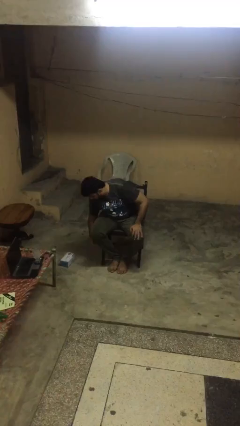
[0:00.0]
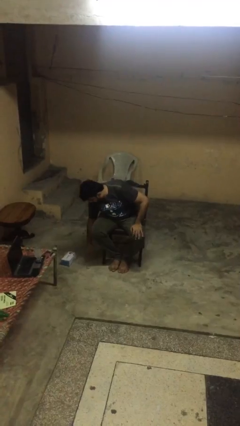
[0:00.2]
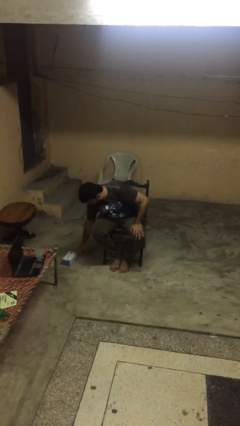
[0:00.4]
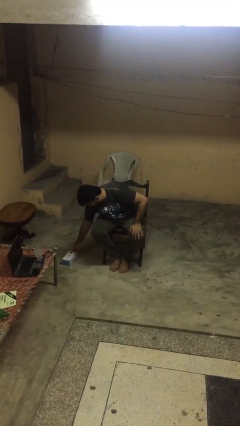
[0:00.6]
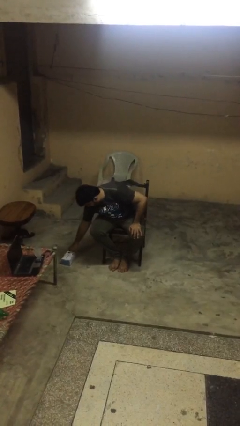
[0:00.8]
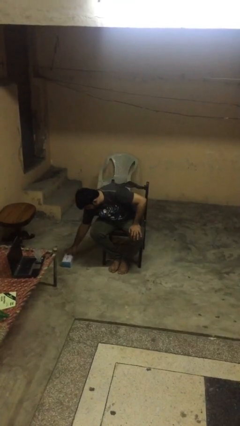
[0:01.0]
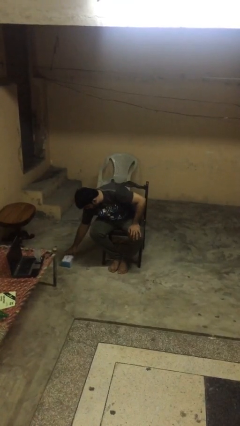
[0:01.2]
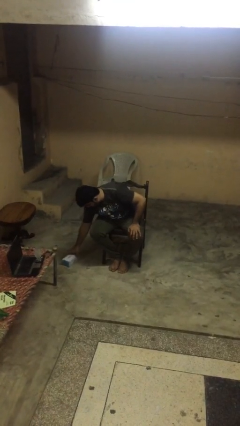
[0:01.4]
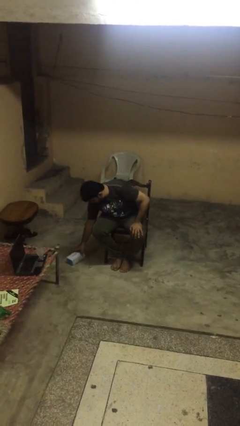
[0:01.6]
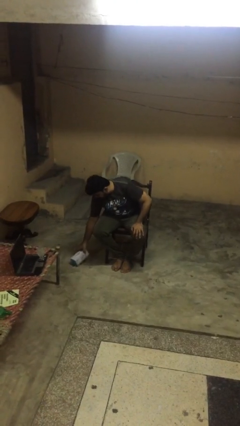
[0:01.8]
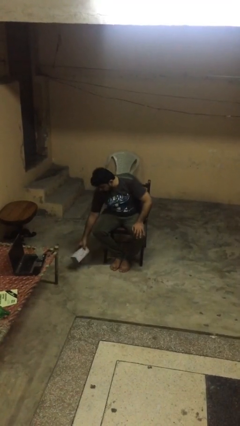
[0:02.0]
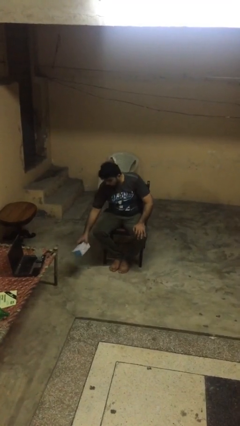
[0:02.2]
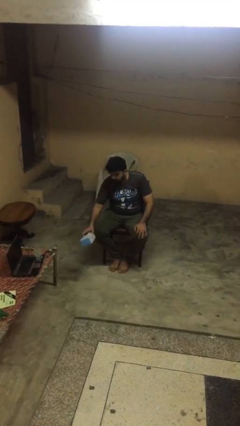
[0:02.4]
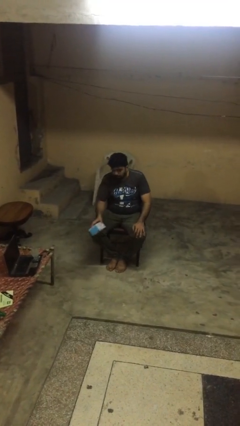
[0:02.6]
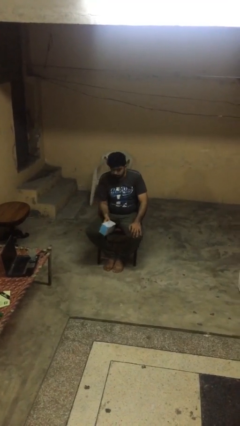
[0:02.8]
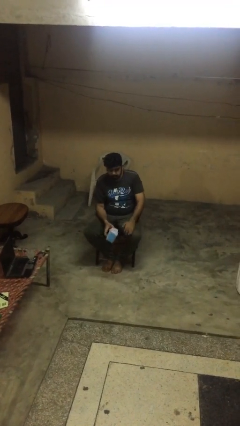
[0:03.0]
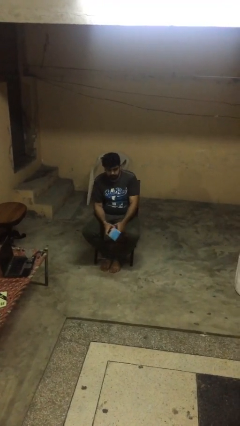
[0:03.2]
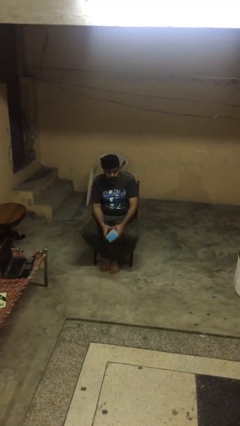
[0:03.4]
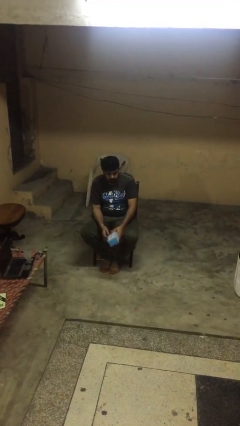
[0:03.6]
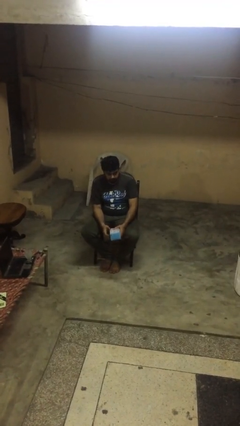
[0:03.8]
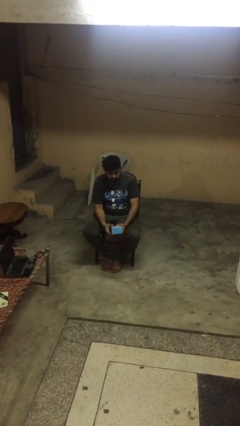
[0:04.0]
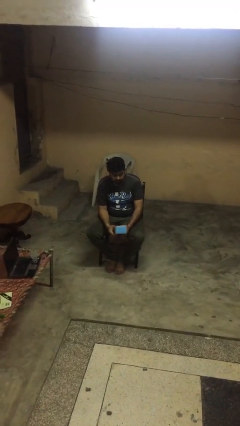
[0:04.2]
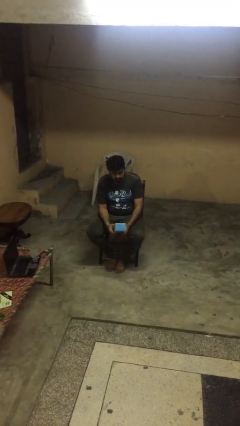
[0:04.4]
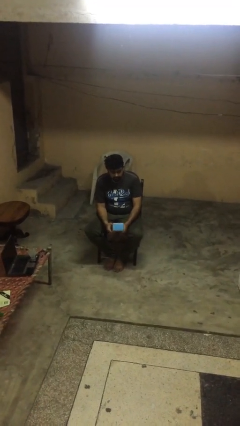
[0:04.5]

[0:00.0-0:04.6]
person picks up object from floor

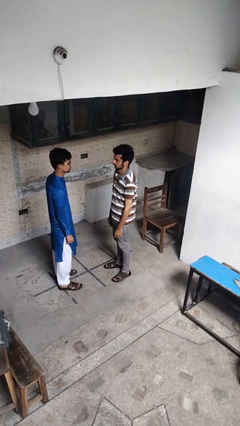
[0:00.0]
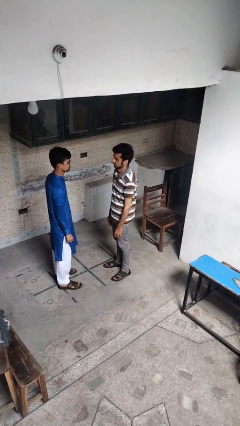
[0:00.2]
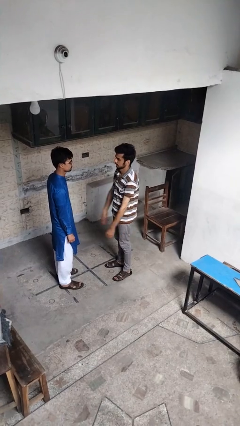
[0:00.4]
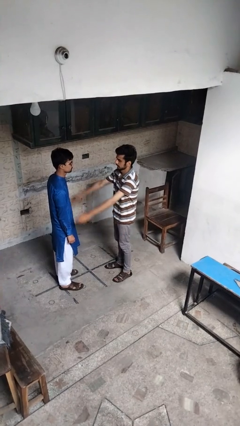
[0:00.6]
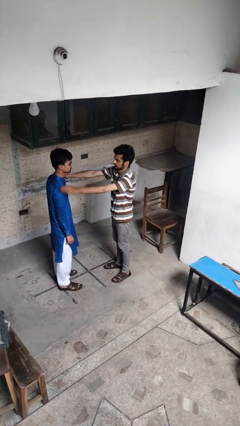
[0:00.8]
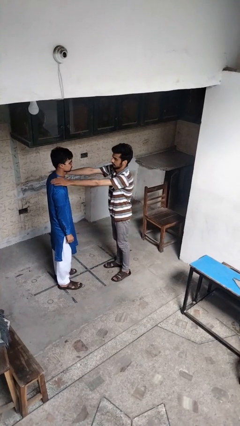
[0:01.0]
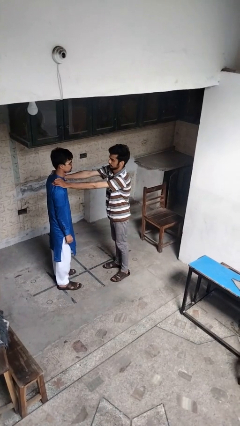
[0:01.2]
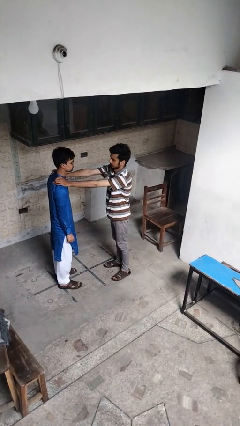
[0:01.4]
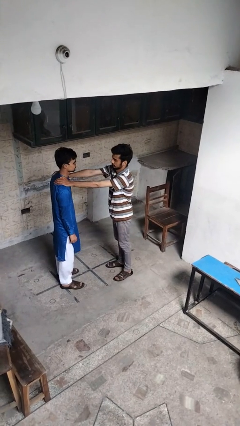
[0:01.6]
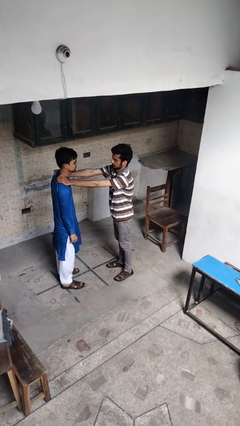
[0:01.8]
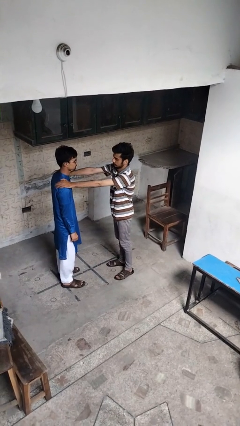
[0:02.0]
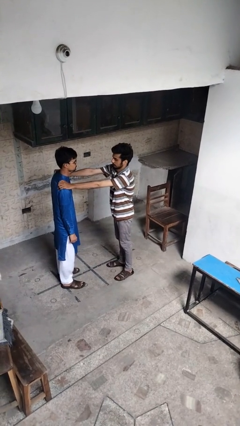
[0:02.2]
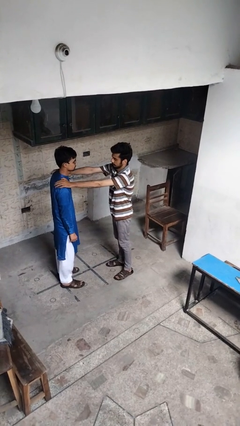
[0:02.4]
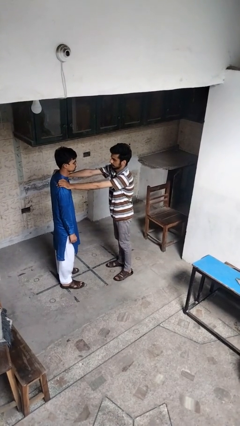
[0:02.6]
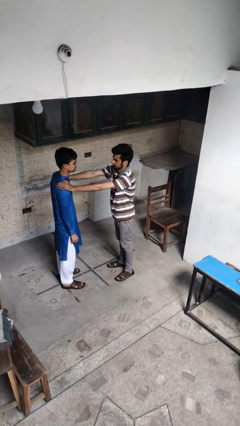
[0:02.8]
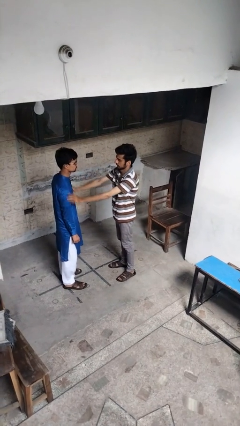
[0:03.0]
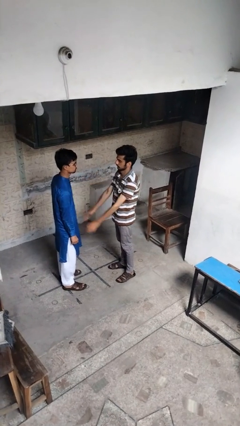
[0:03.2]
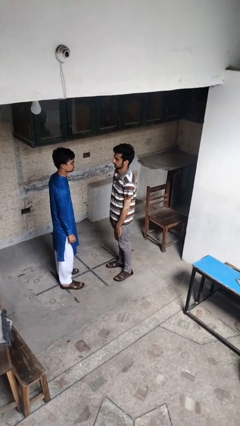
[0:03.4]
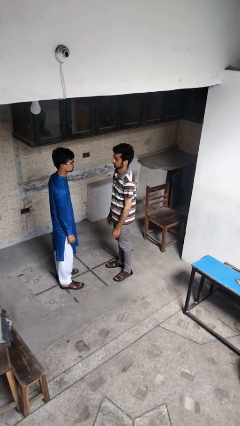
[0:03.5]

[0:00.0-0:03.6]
person pounds shoulders of person

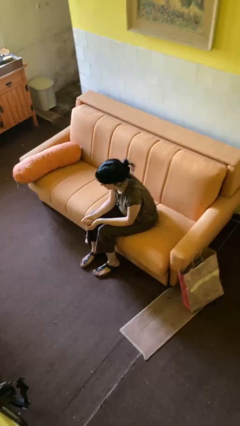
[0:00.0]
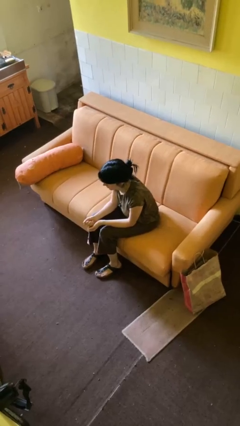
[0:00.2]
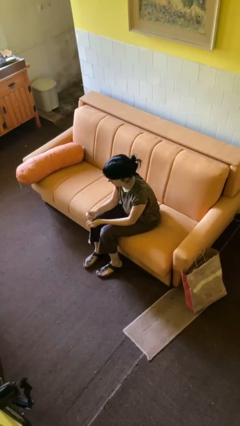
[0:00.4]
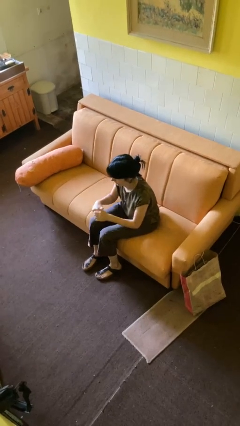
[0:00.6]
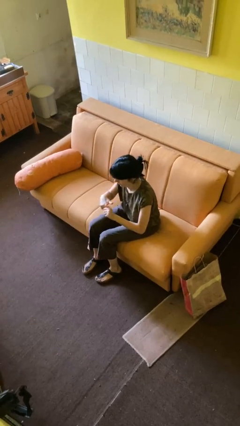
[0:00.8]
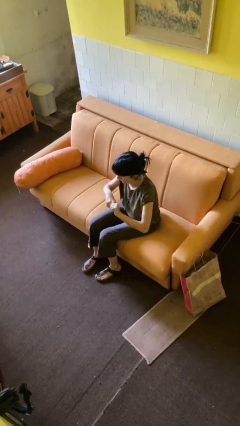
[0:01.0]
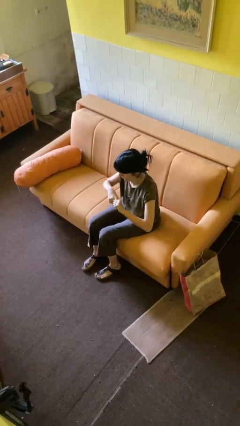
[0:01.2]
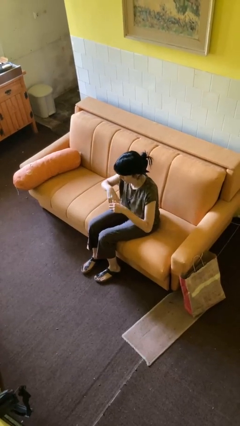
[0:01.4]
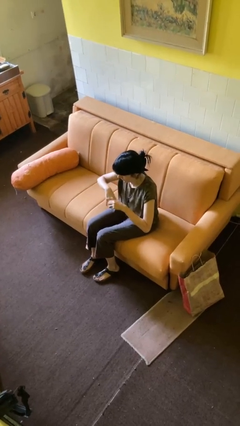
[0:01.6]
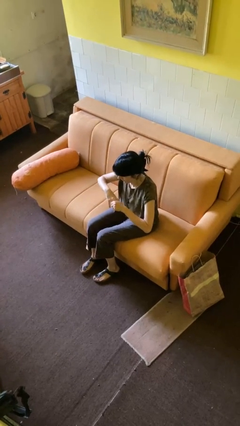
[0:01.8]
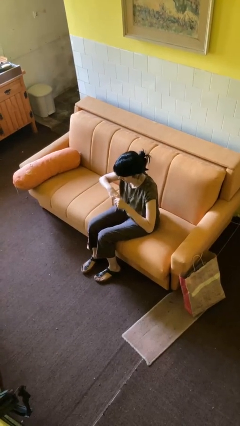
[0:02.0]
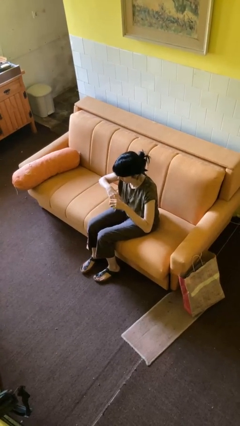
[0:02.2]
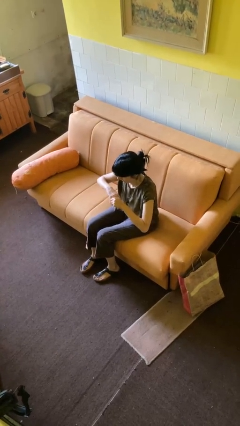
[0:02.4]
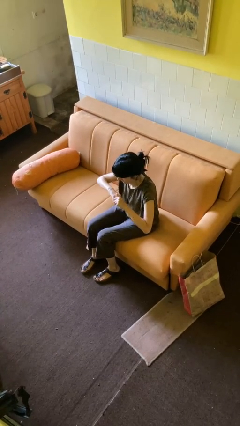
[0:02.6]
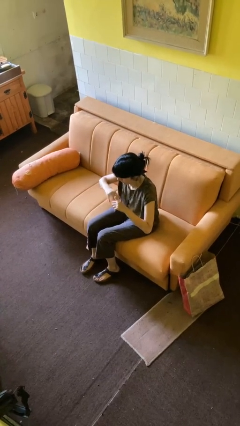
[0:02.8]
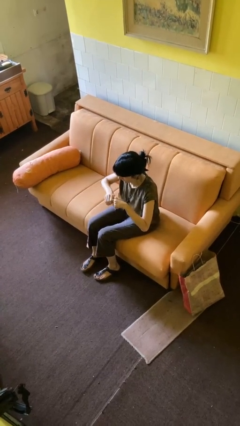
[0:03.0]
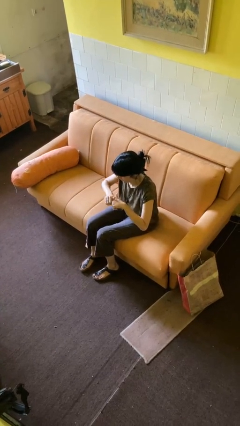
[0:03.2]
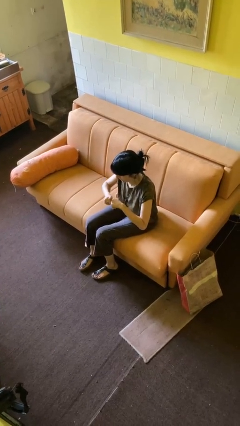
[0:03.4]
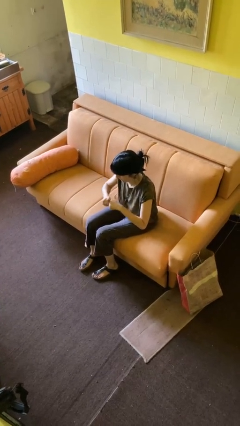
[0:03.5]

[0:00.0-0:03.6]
person cracks knuckles

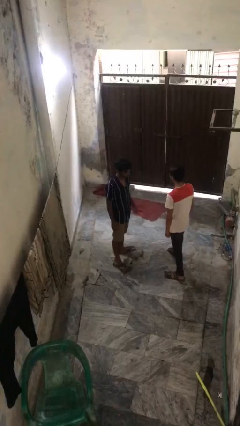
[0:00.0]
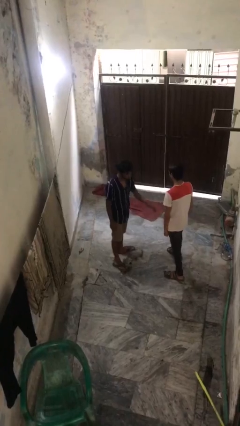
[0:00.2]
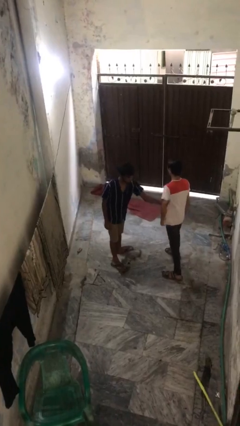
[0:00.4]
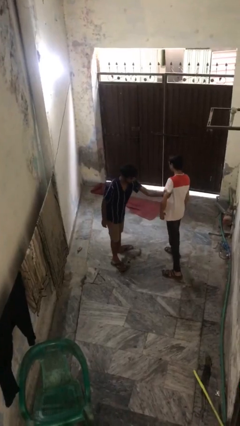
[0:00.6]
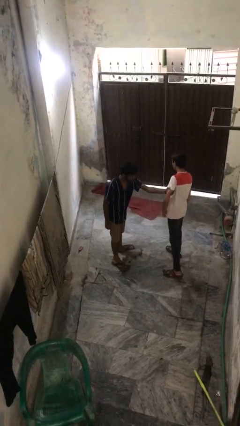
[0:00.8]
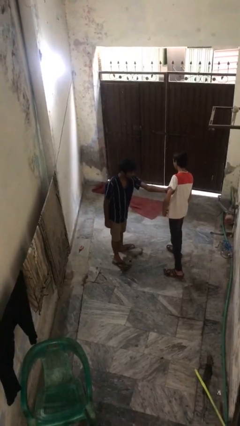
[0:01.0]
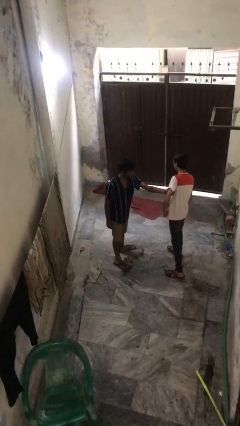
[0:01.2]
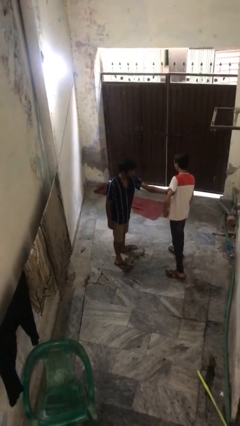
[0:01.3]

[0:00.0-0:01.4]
person grabs person by bicep

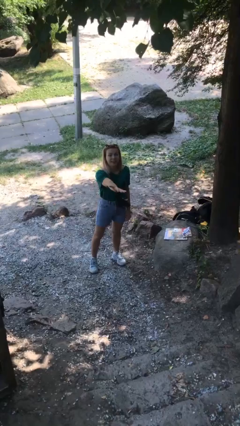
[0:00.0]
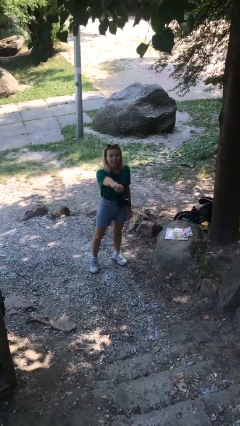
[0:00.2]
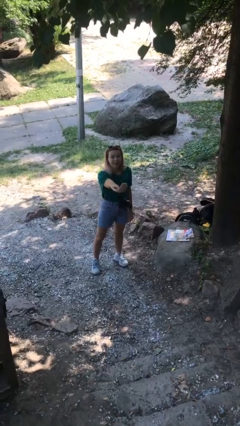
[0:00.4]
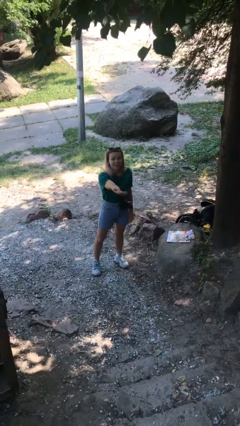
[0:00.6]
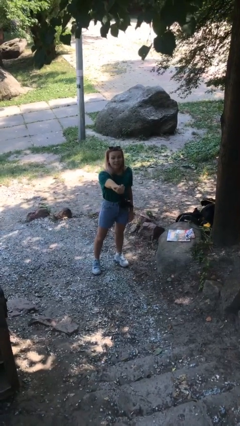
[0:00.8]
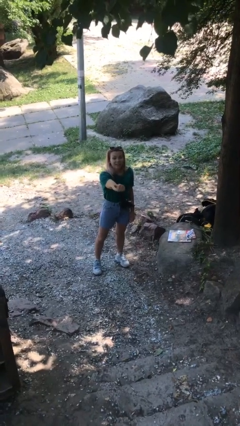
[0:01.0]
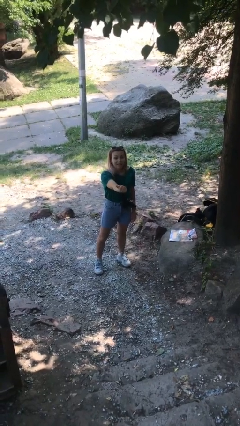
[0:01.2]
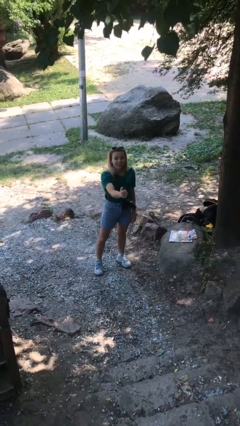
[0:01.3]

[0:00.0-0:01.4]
person gestures come here

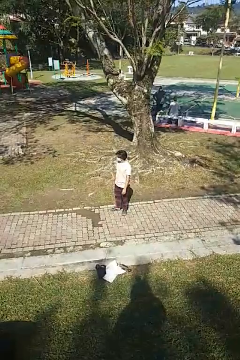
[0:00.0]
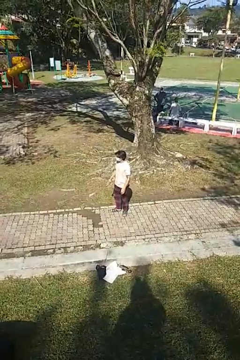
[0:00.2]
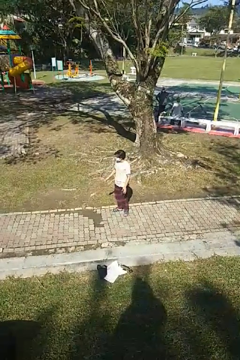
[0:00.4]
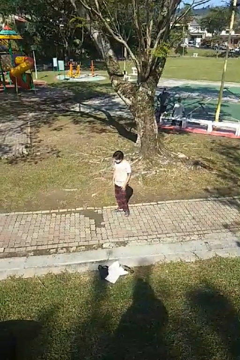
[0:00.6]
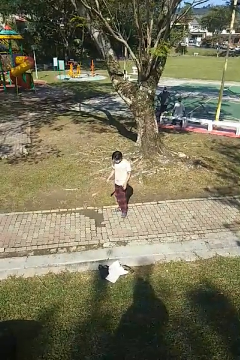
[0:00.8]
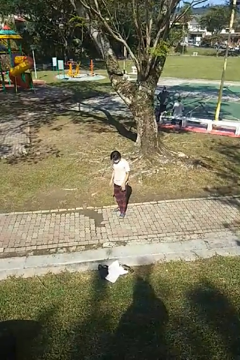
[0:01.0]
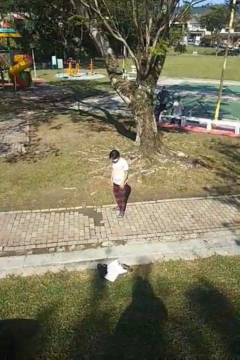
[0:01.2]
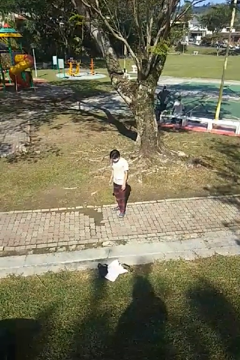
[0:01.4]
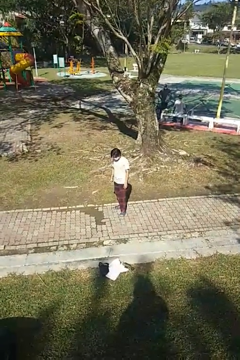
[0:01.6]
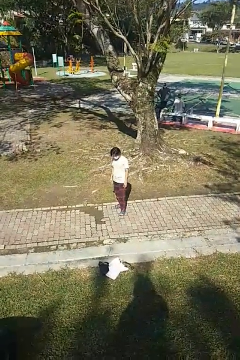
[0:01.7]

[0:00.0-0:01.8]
person slaps hands on thighs

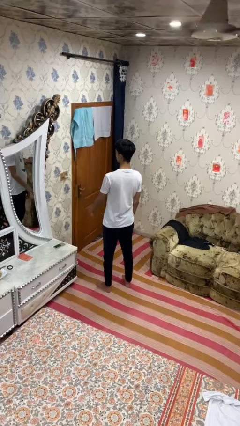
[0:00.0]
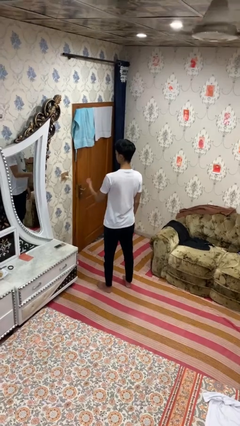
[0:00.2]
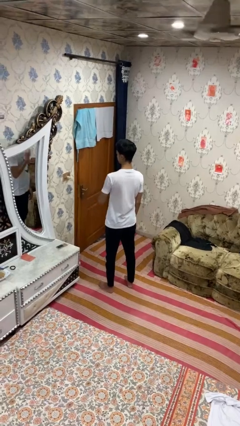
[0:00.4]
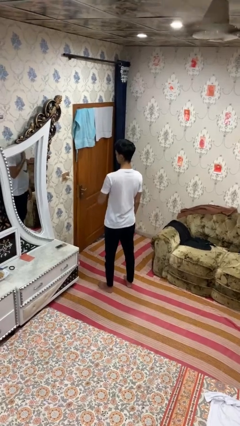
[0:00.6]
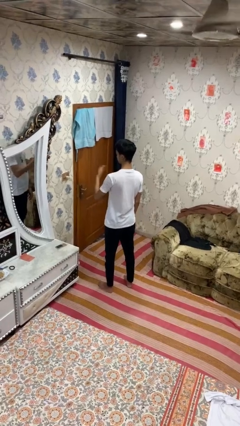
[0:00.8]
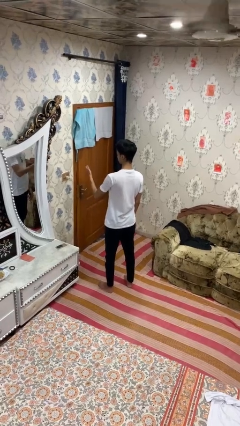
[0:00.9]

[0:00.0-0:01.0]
person drums on chest
